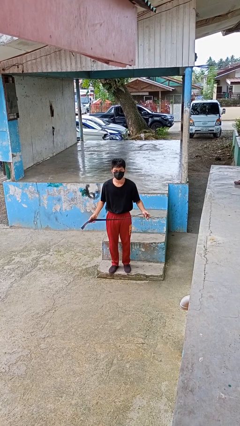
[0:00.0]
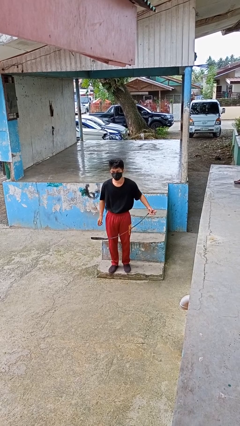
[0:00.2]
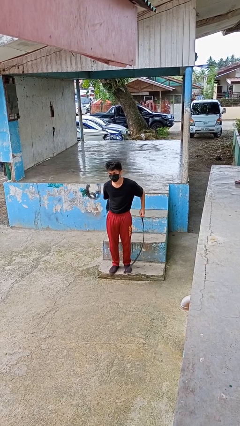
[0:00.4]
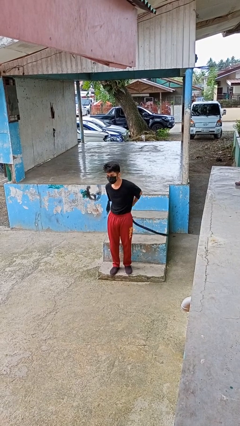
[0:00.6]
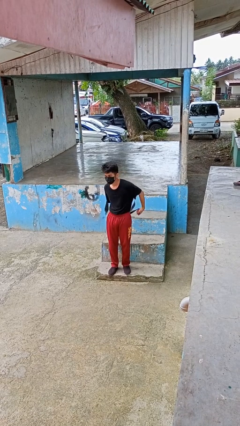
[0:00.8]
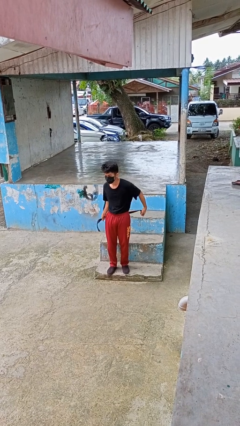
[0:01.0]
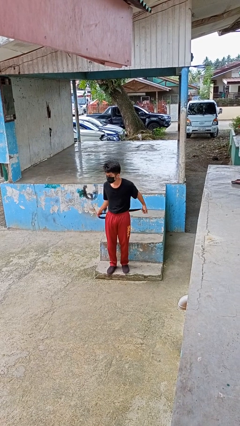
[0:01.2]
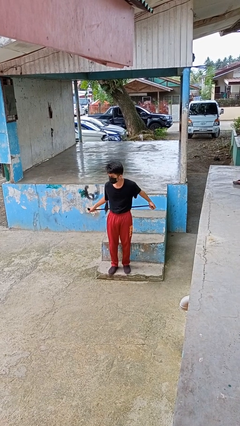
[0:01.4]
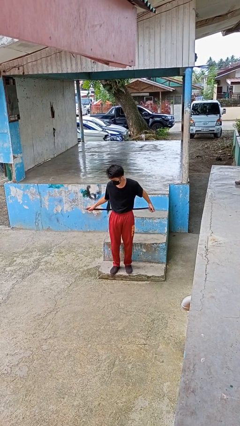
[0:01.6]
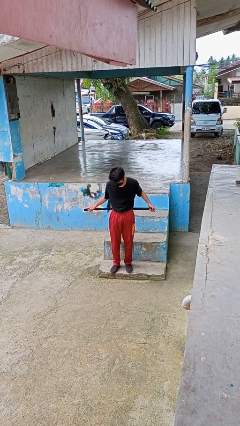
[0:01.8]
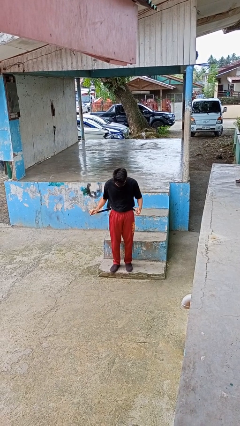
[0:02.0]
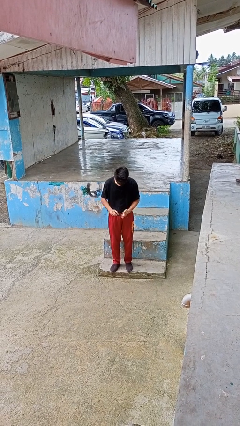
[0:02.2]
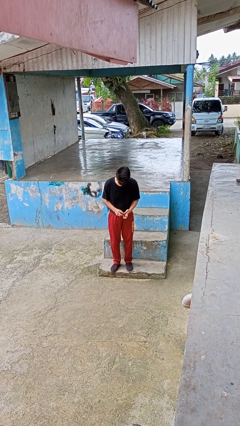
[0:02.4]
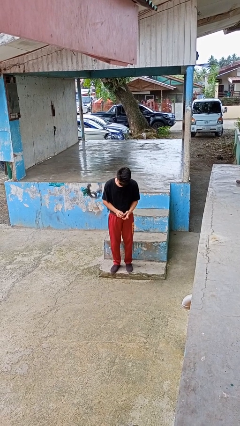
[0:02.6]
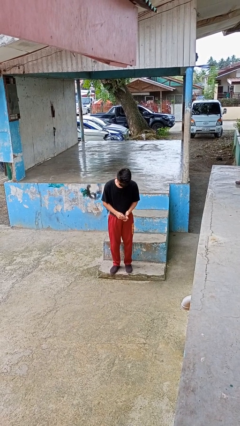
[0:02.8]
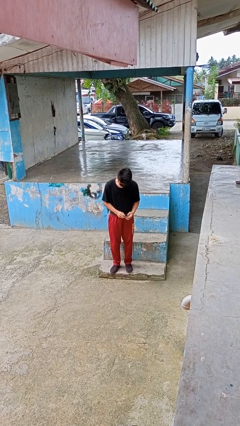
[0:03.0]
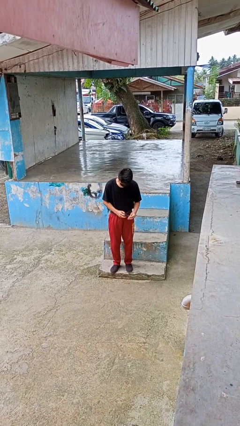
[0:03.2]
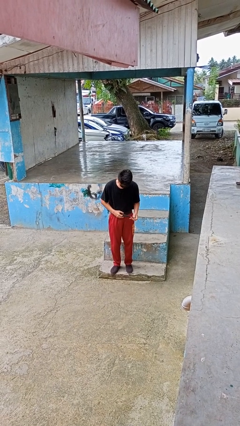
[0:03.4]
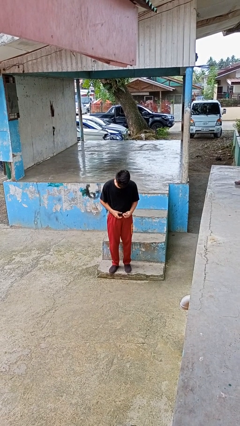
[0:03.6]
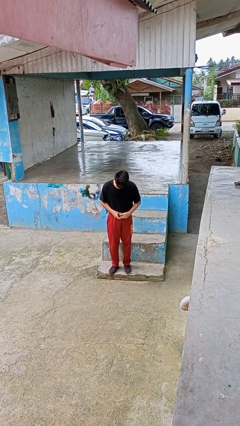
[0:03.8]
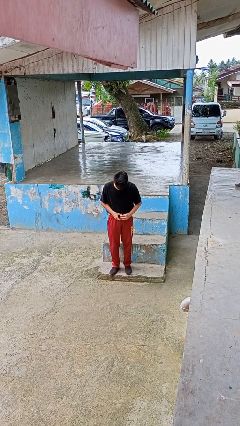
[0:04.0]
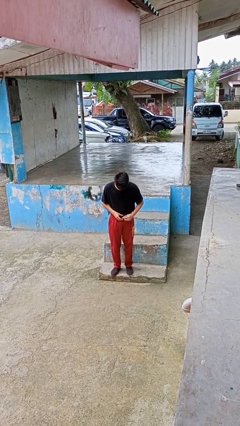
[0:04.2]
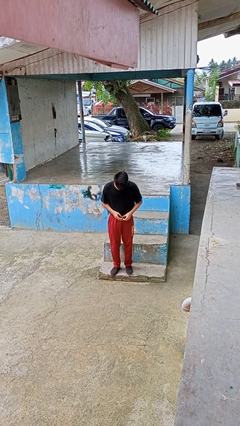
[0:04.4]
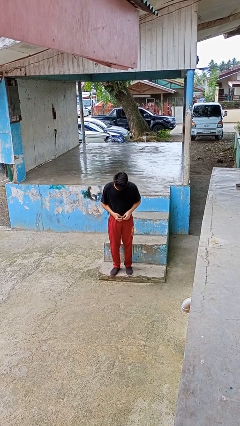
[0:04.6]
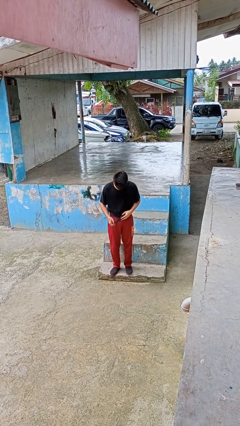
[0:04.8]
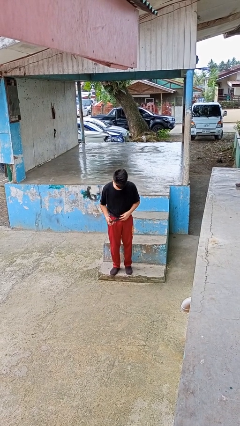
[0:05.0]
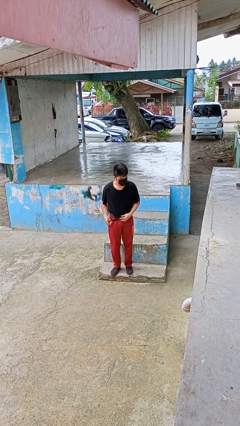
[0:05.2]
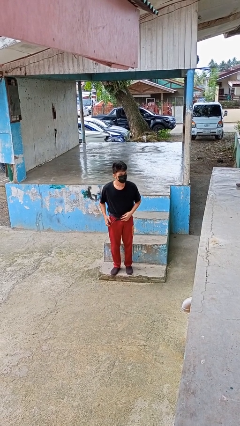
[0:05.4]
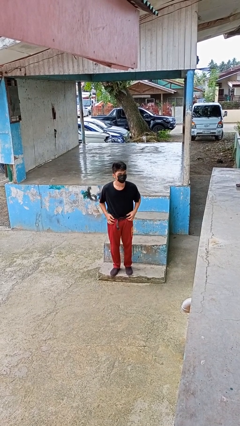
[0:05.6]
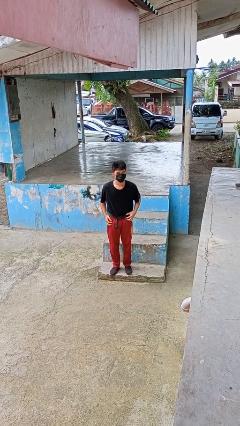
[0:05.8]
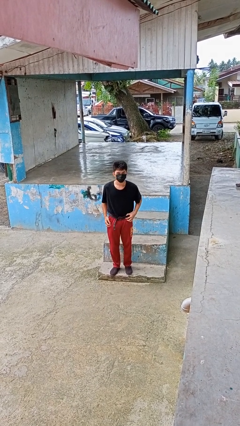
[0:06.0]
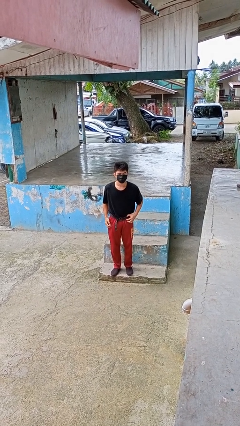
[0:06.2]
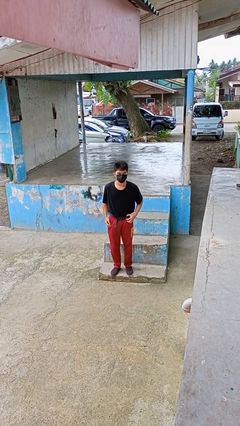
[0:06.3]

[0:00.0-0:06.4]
person puts on belt

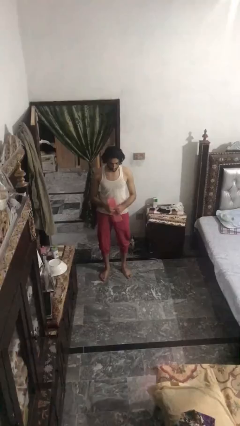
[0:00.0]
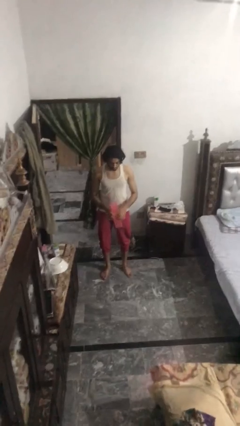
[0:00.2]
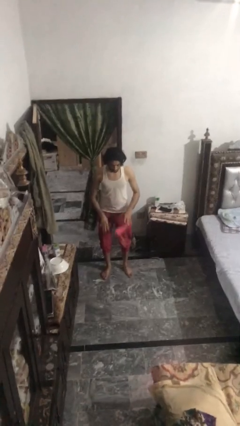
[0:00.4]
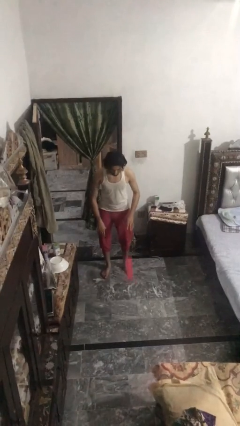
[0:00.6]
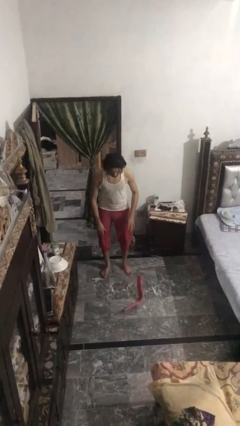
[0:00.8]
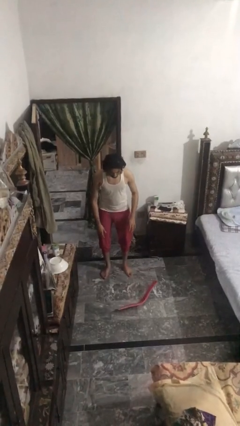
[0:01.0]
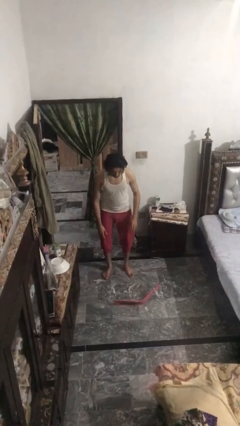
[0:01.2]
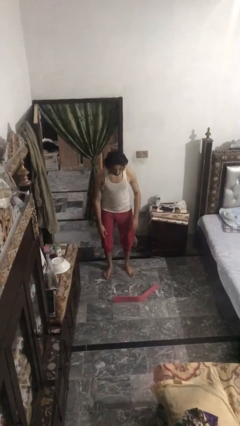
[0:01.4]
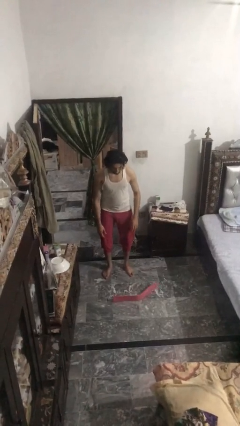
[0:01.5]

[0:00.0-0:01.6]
person drops object

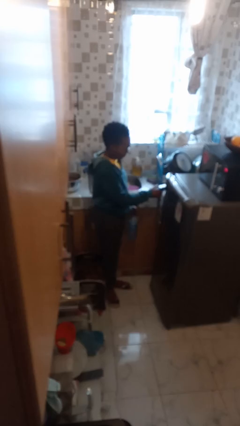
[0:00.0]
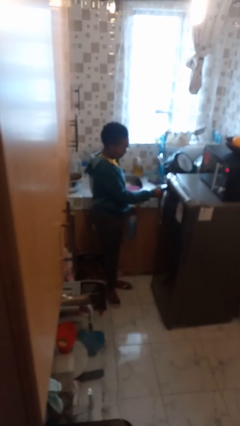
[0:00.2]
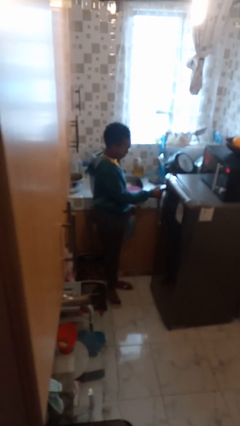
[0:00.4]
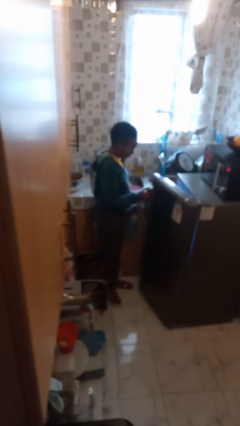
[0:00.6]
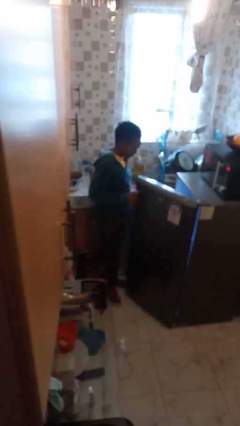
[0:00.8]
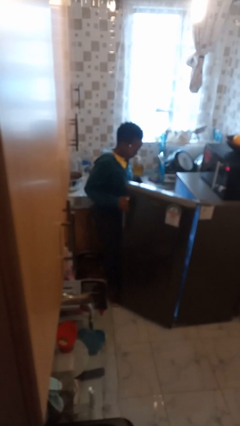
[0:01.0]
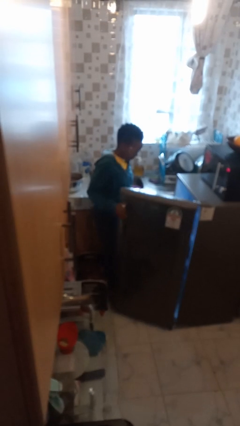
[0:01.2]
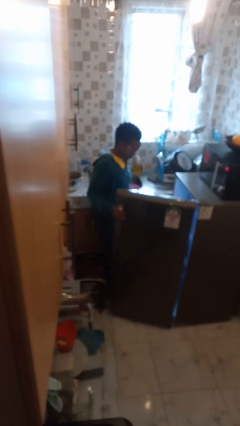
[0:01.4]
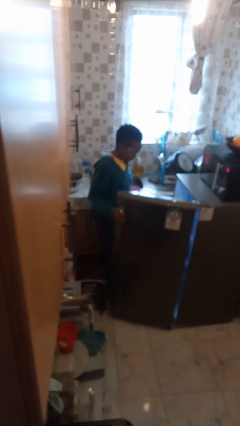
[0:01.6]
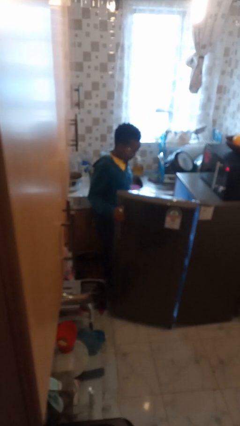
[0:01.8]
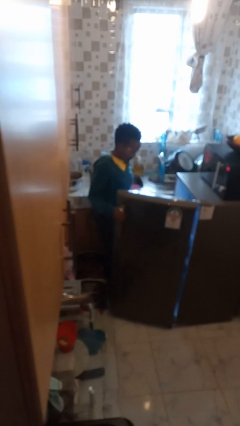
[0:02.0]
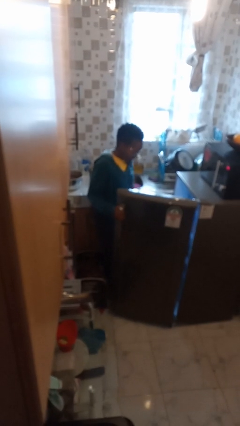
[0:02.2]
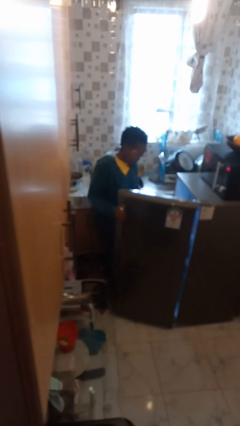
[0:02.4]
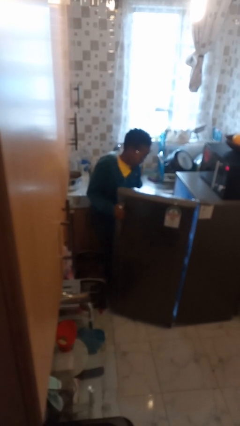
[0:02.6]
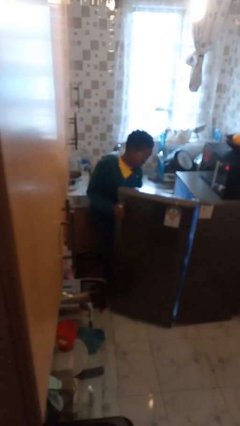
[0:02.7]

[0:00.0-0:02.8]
person opens refrigerator

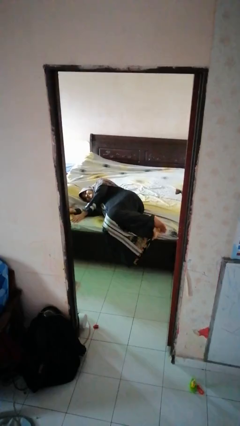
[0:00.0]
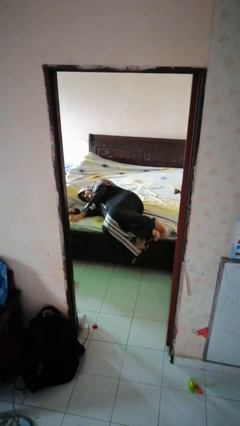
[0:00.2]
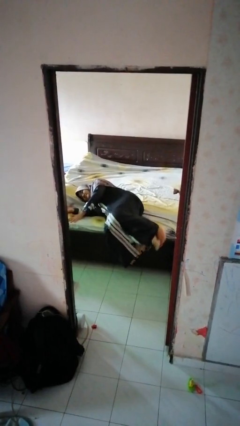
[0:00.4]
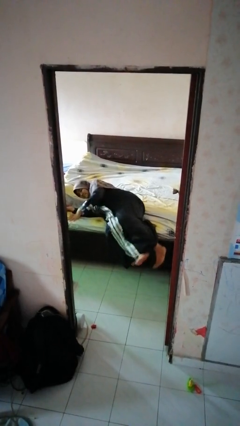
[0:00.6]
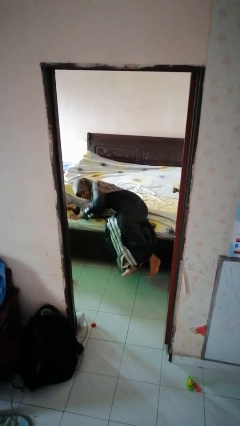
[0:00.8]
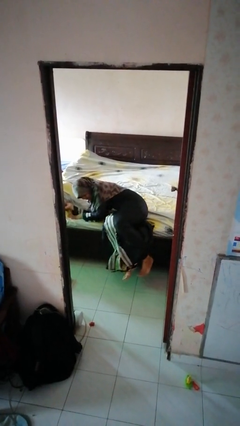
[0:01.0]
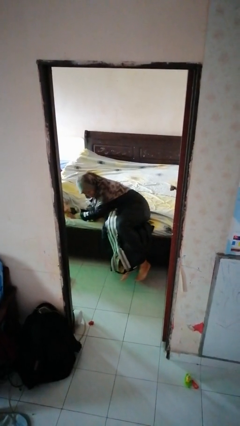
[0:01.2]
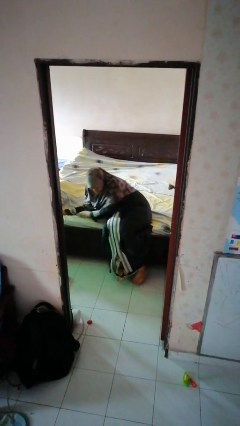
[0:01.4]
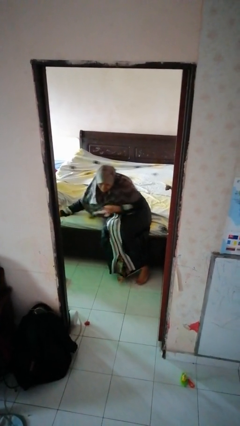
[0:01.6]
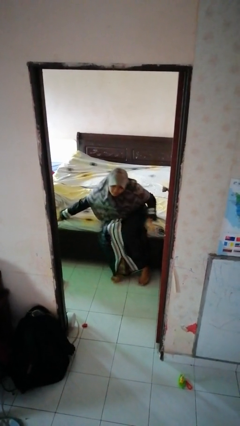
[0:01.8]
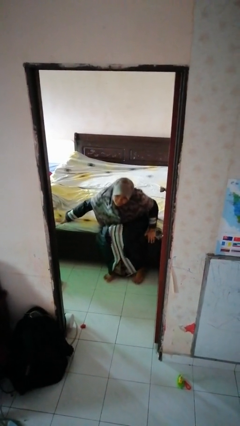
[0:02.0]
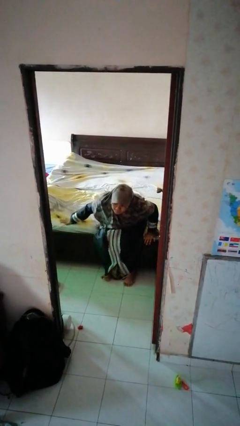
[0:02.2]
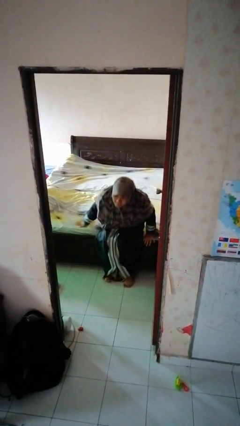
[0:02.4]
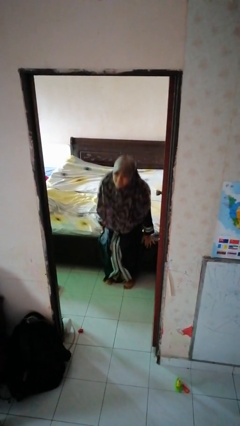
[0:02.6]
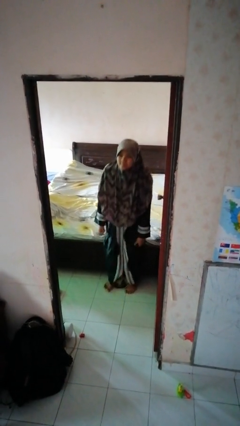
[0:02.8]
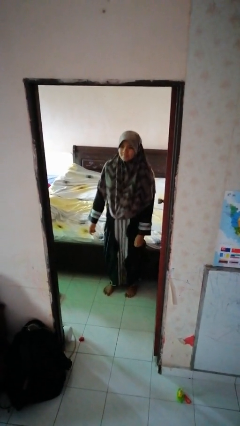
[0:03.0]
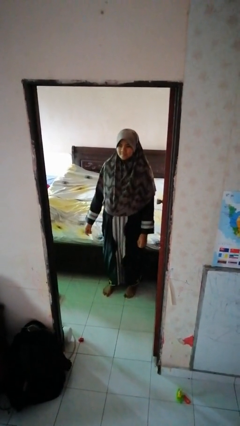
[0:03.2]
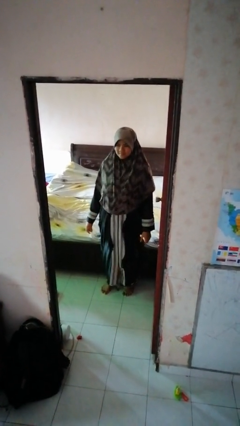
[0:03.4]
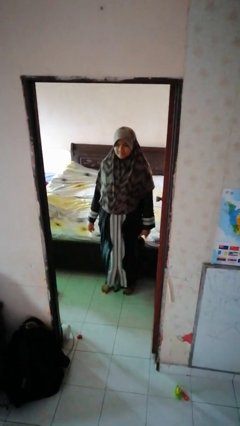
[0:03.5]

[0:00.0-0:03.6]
person stands up

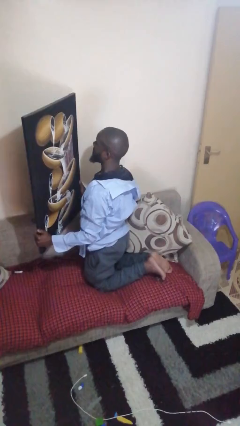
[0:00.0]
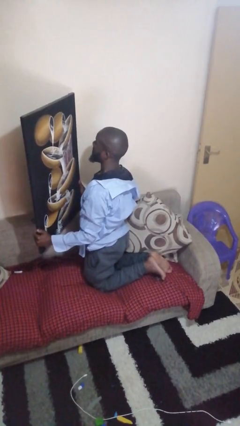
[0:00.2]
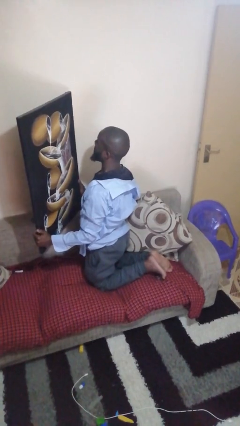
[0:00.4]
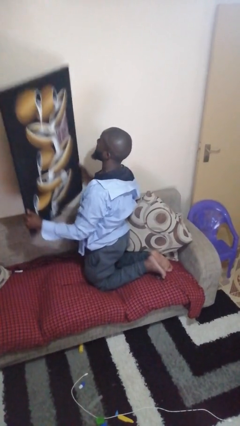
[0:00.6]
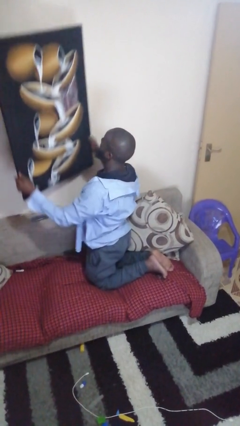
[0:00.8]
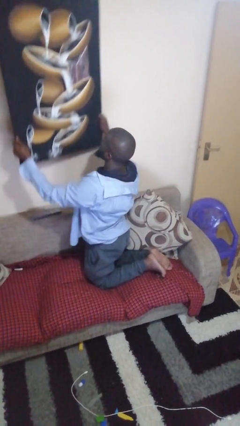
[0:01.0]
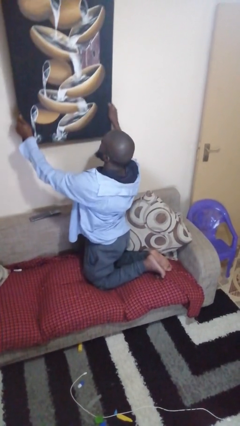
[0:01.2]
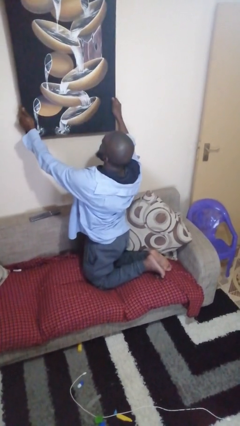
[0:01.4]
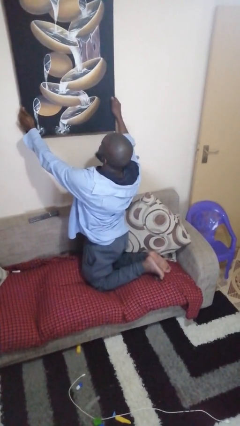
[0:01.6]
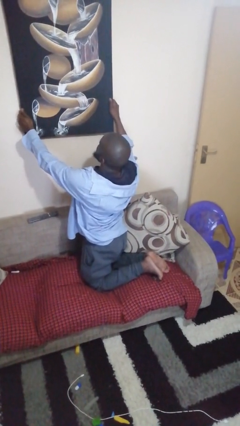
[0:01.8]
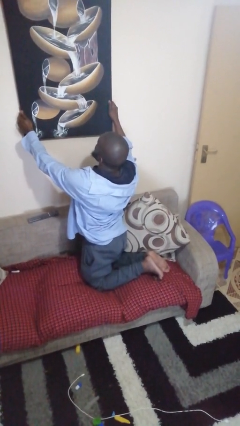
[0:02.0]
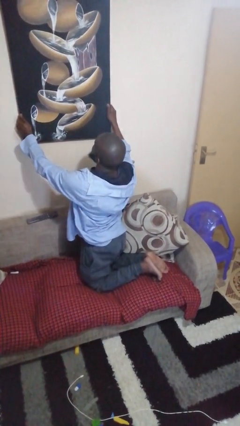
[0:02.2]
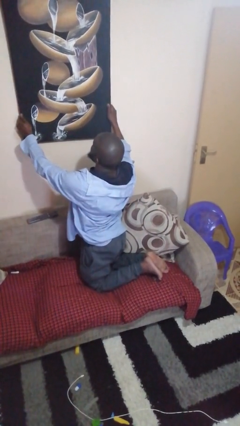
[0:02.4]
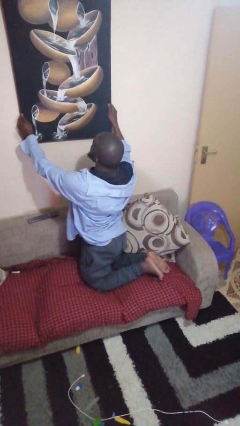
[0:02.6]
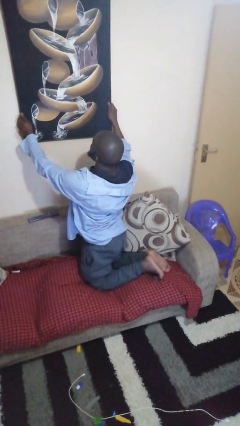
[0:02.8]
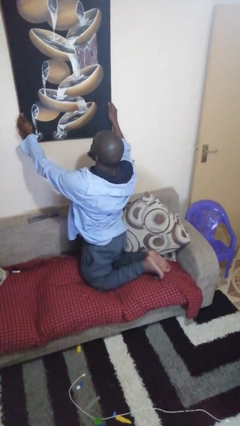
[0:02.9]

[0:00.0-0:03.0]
person puts up picture frame
